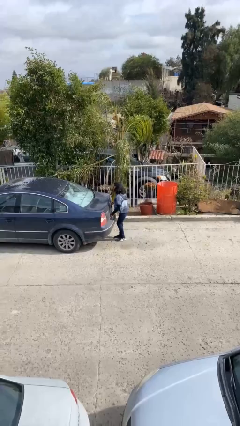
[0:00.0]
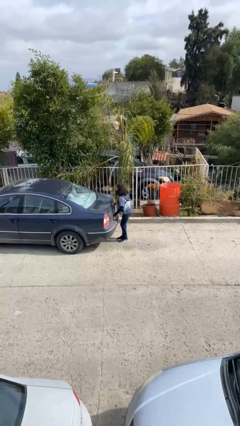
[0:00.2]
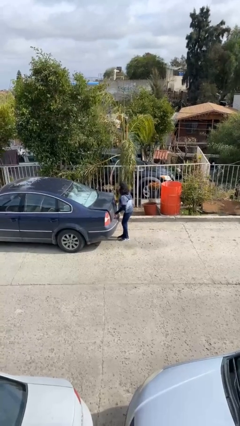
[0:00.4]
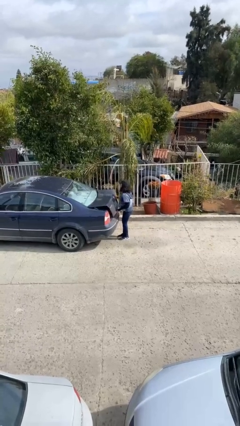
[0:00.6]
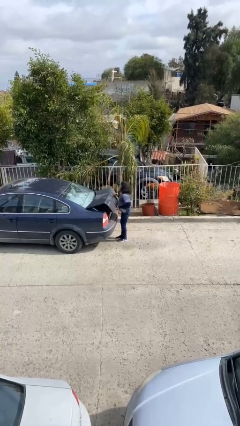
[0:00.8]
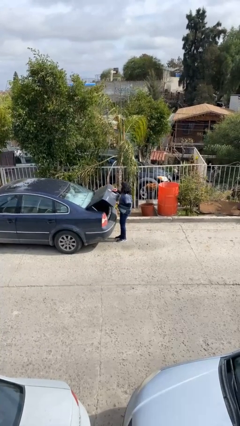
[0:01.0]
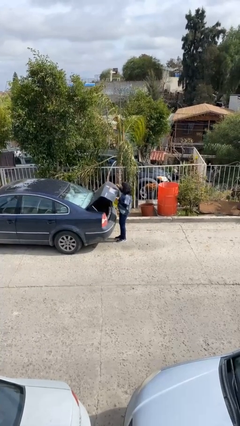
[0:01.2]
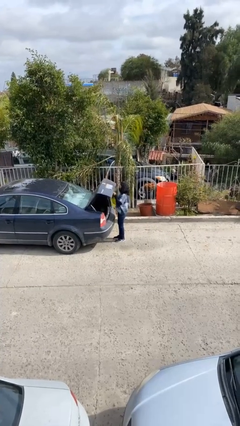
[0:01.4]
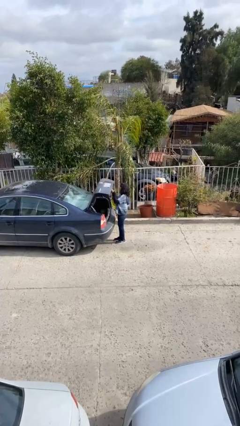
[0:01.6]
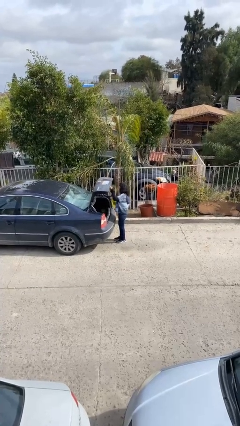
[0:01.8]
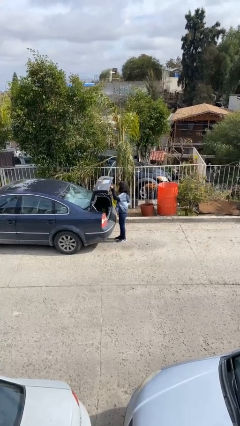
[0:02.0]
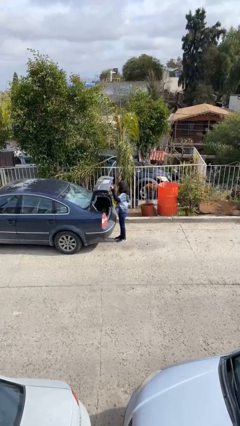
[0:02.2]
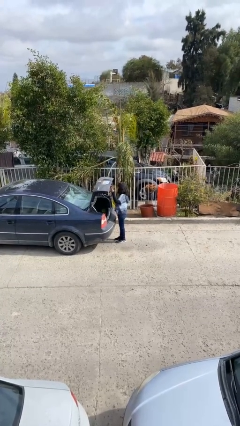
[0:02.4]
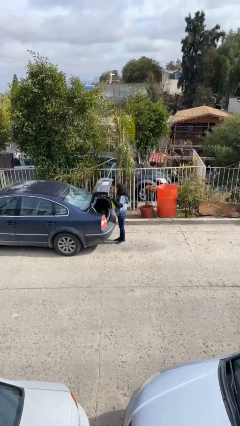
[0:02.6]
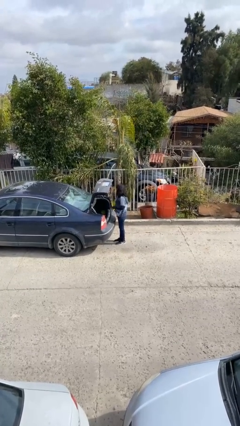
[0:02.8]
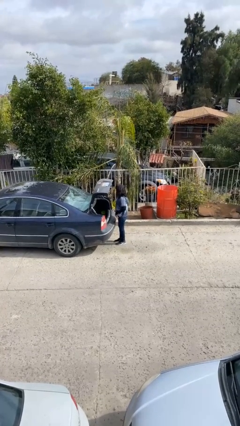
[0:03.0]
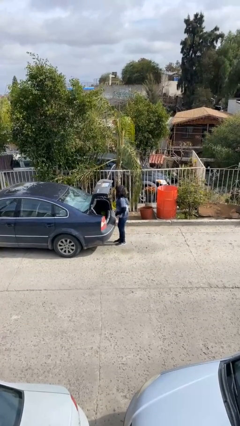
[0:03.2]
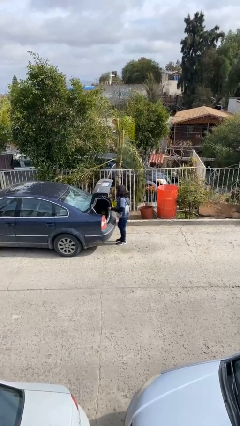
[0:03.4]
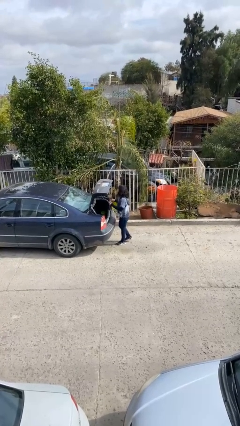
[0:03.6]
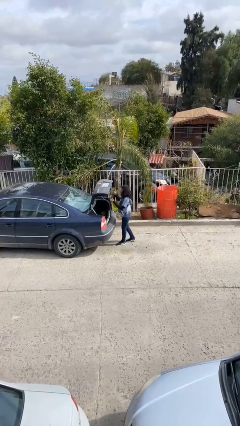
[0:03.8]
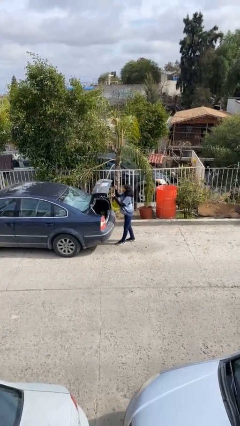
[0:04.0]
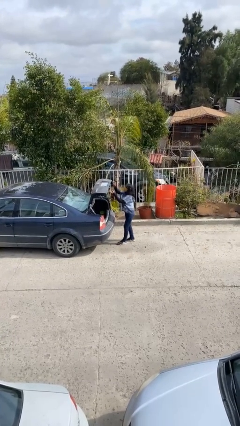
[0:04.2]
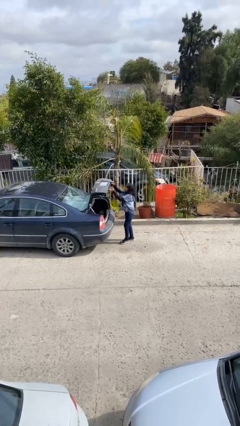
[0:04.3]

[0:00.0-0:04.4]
person opens car trunk

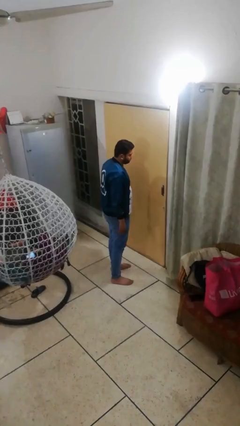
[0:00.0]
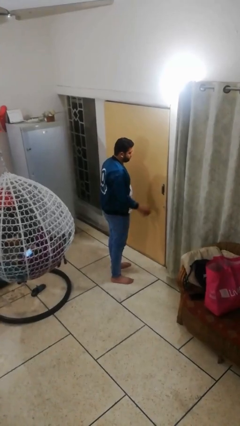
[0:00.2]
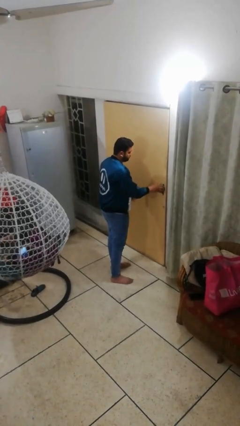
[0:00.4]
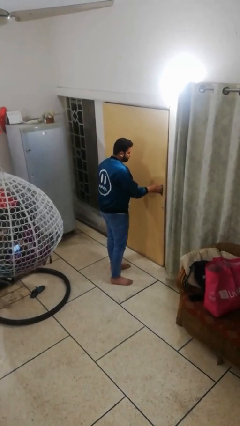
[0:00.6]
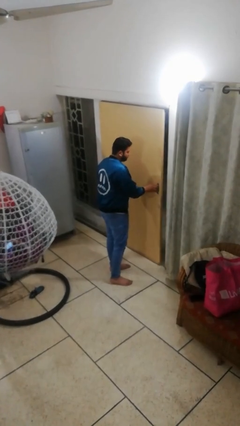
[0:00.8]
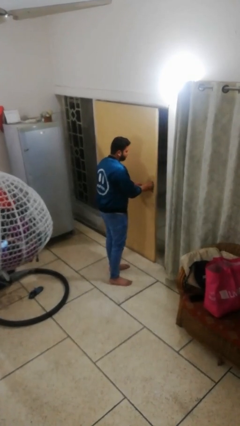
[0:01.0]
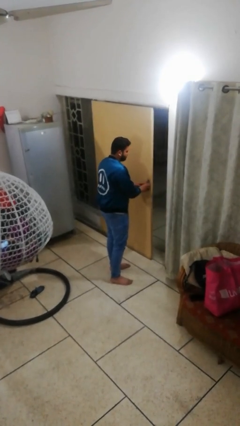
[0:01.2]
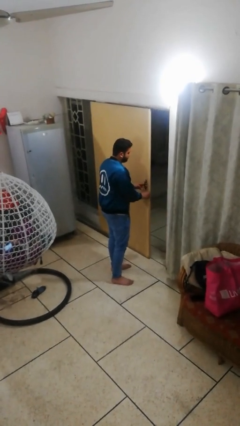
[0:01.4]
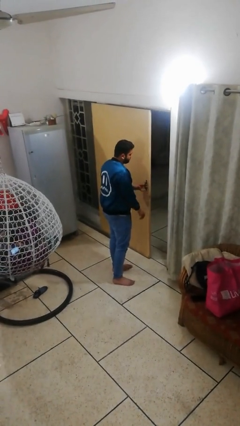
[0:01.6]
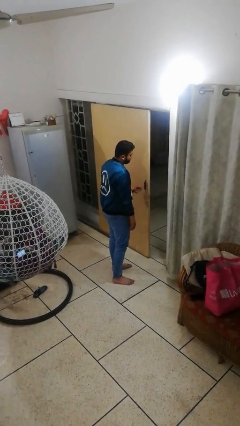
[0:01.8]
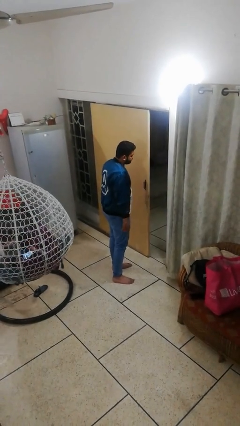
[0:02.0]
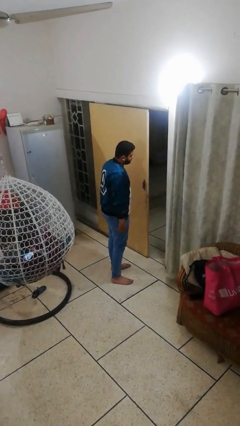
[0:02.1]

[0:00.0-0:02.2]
person opens facility door

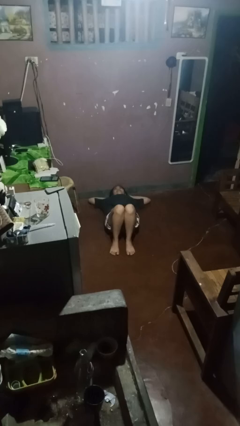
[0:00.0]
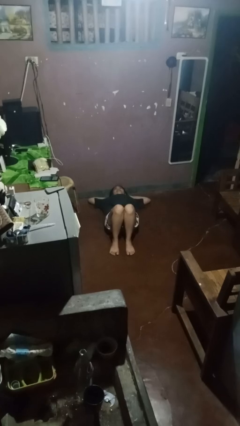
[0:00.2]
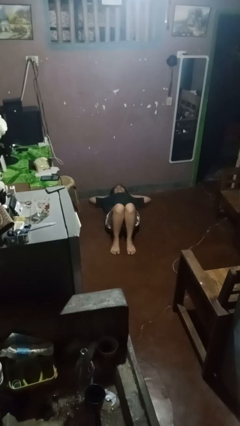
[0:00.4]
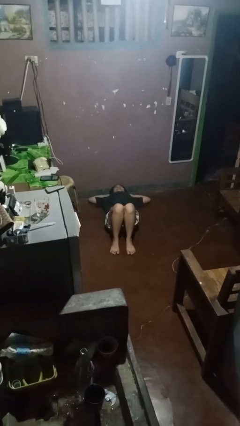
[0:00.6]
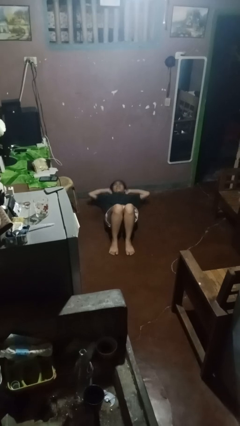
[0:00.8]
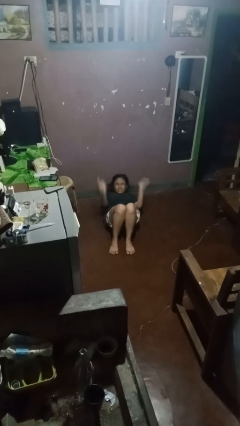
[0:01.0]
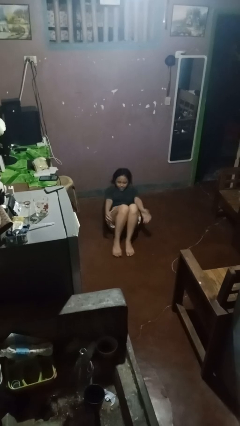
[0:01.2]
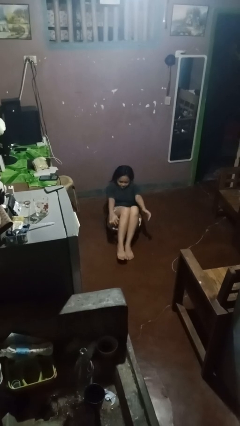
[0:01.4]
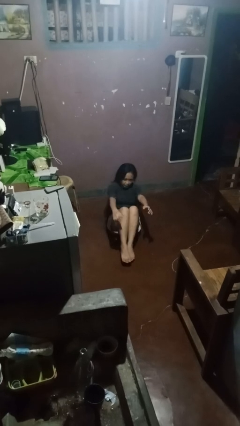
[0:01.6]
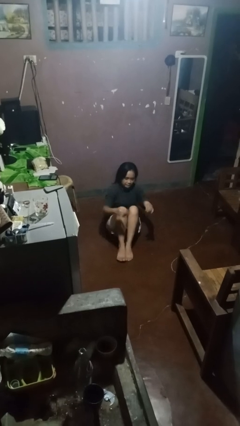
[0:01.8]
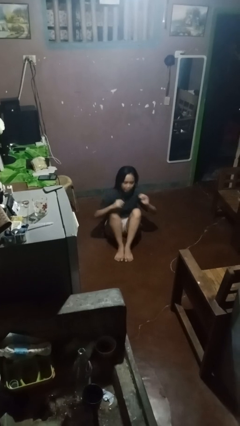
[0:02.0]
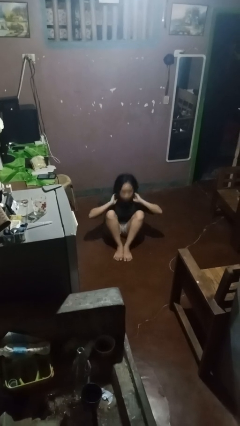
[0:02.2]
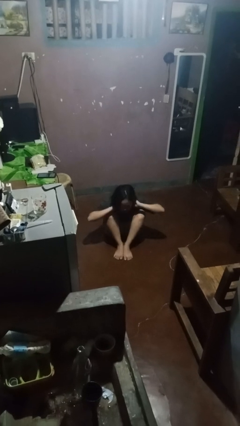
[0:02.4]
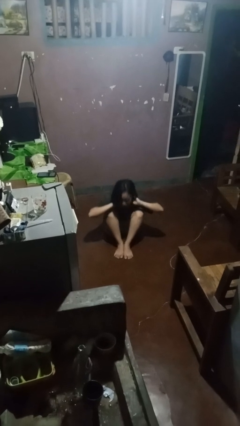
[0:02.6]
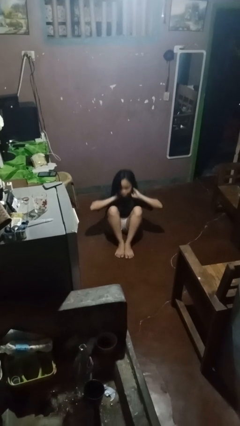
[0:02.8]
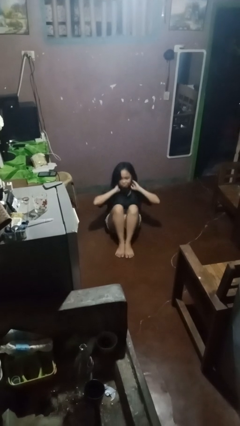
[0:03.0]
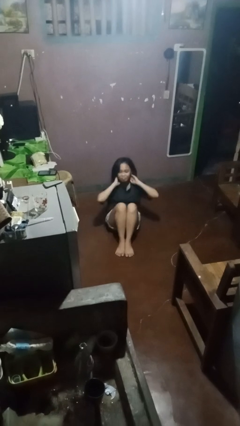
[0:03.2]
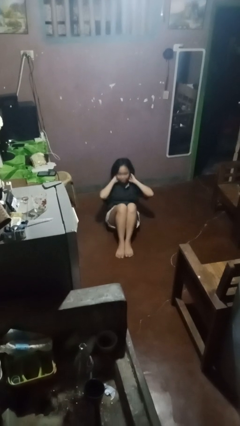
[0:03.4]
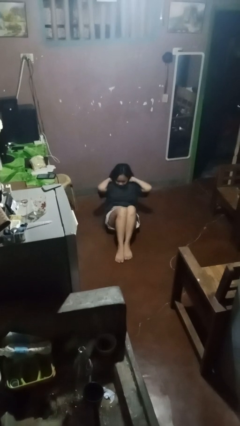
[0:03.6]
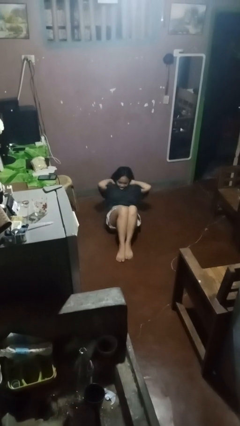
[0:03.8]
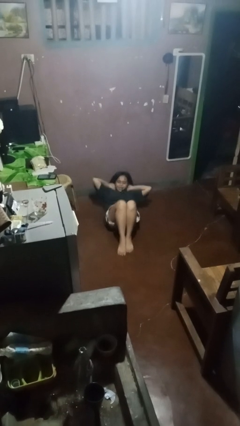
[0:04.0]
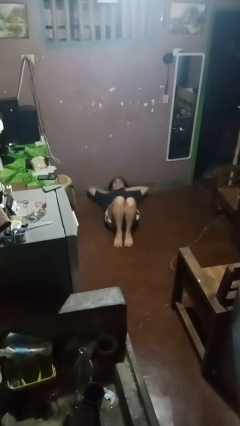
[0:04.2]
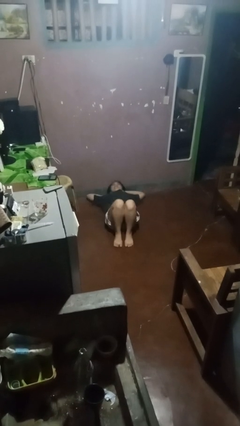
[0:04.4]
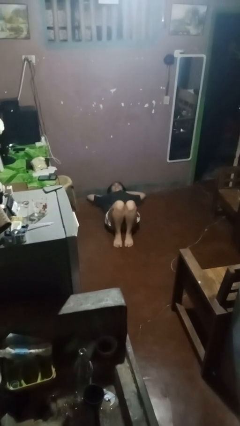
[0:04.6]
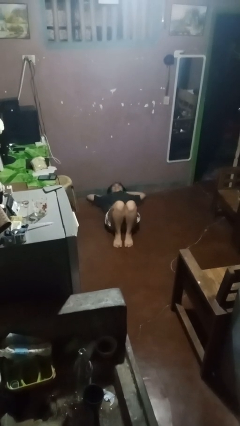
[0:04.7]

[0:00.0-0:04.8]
person exercises with situp

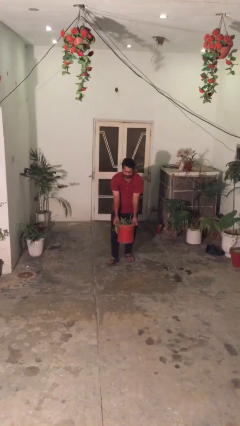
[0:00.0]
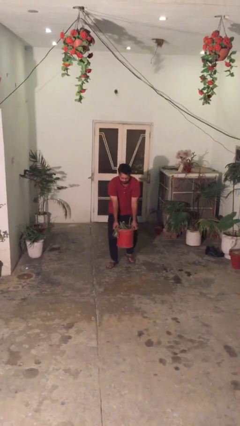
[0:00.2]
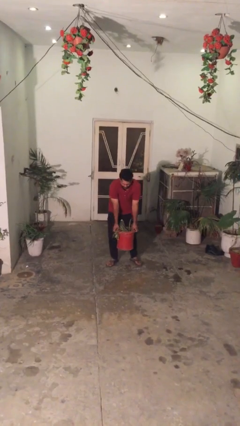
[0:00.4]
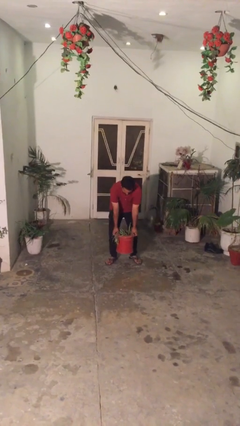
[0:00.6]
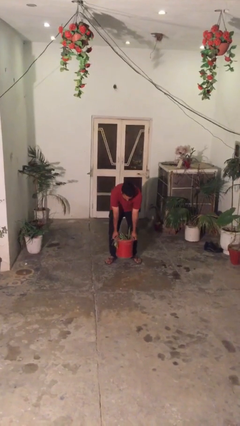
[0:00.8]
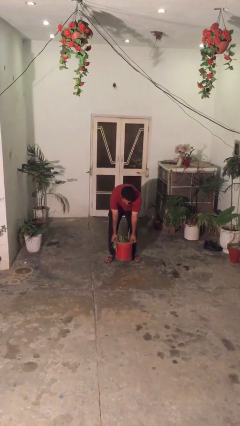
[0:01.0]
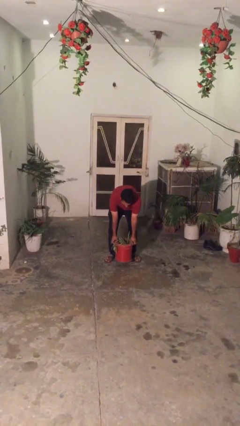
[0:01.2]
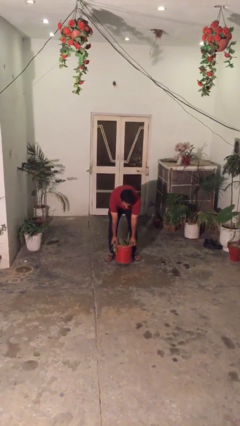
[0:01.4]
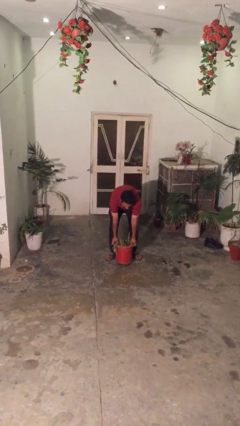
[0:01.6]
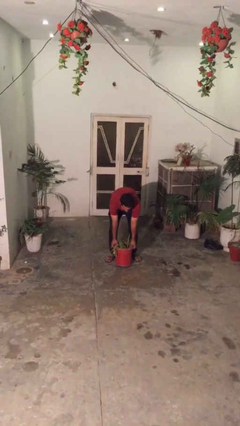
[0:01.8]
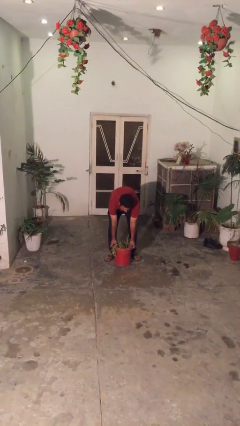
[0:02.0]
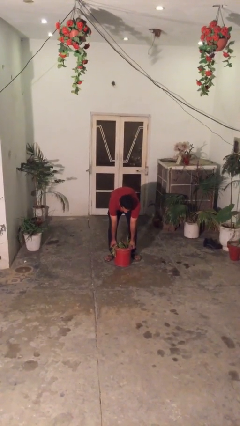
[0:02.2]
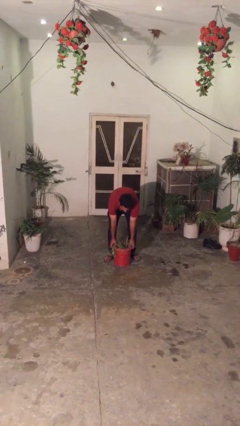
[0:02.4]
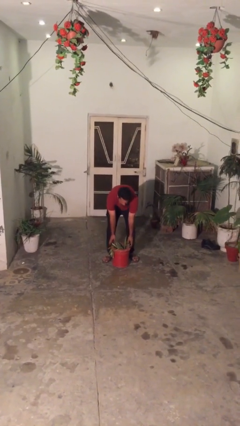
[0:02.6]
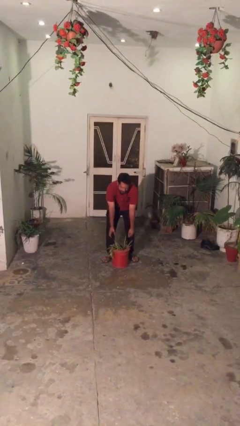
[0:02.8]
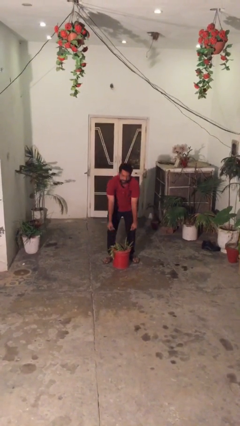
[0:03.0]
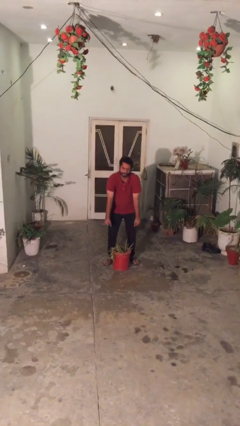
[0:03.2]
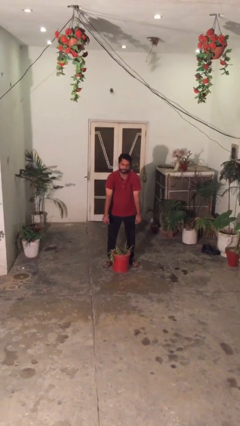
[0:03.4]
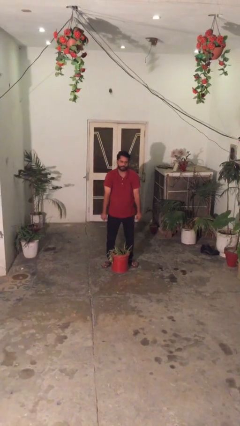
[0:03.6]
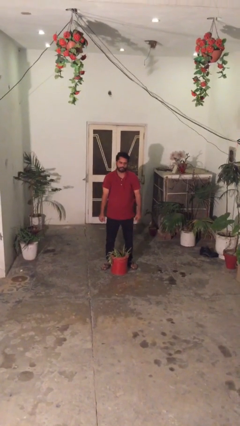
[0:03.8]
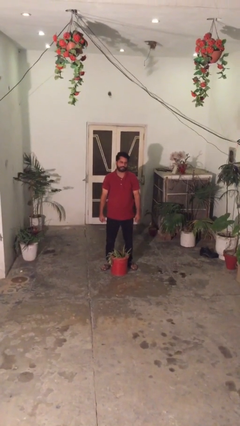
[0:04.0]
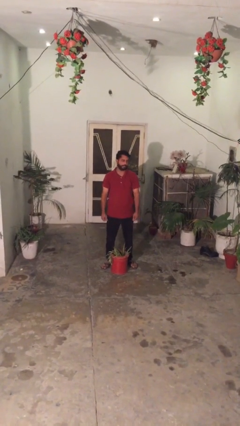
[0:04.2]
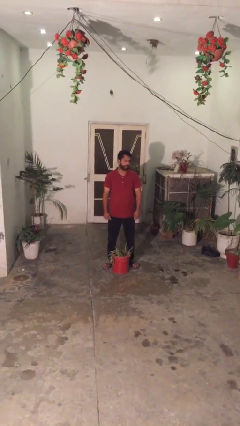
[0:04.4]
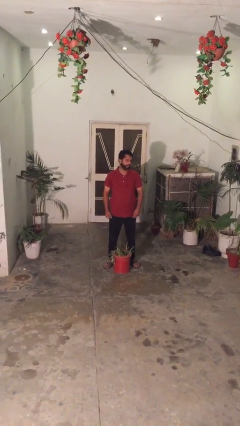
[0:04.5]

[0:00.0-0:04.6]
person puts down object on floor

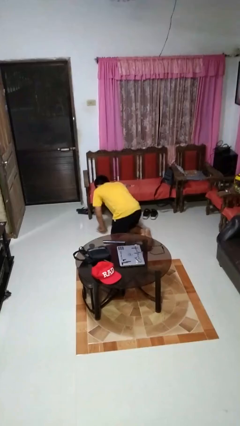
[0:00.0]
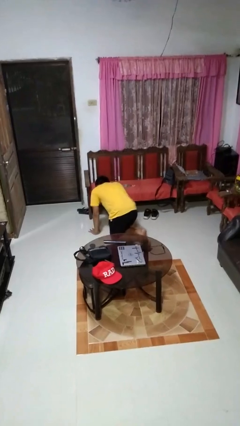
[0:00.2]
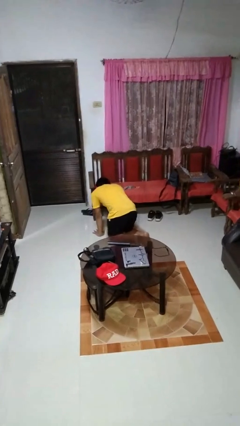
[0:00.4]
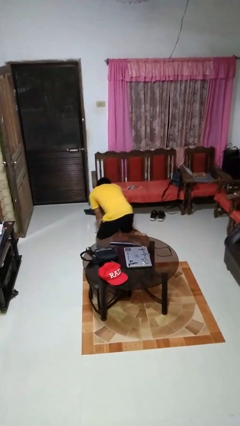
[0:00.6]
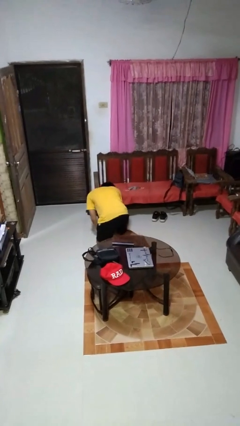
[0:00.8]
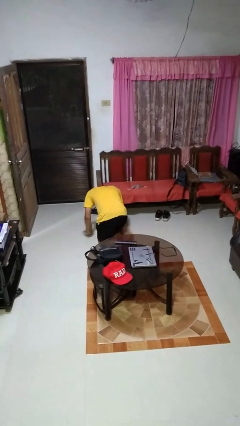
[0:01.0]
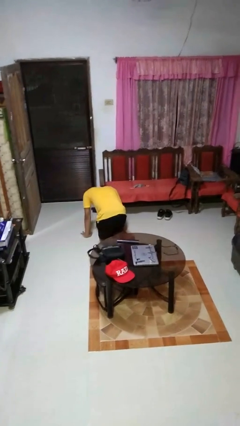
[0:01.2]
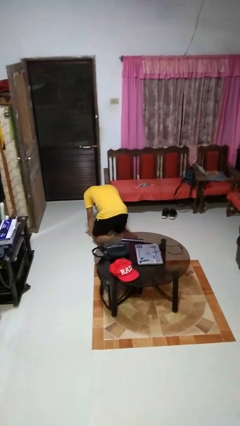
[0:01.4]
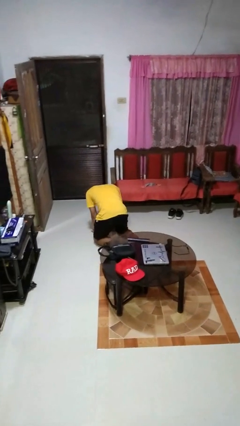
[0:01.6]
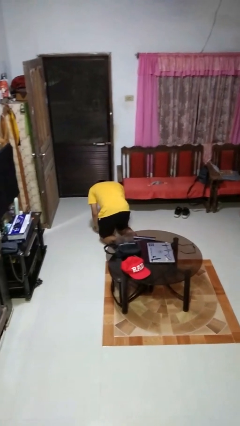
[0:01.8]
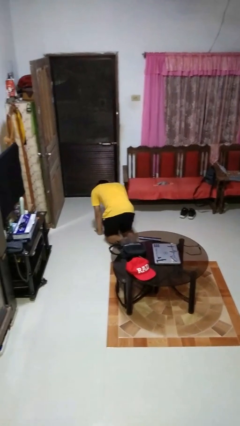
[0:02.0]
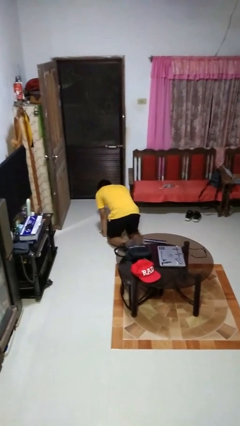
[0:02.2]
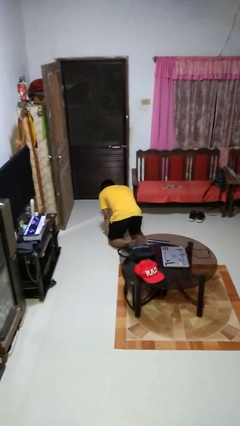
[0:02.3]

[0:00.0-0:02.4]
person crawls
